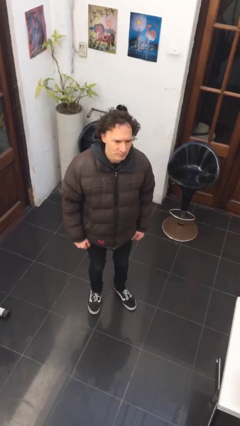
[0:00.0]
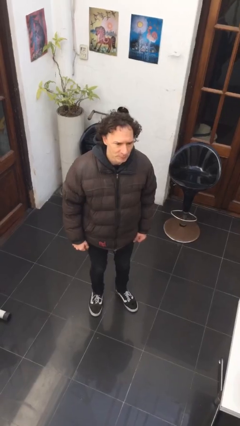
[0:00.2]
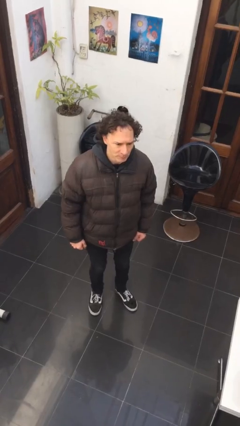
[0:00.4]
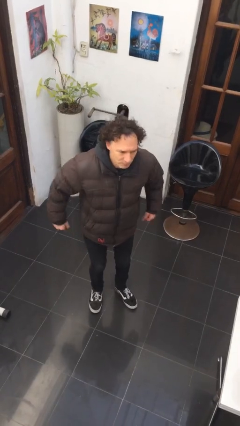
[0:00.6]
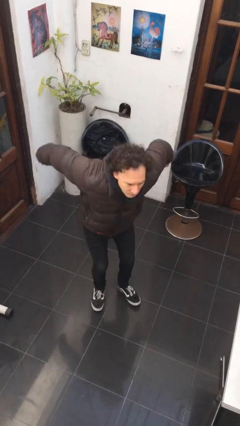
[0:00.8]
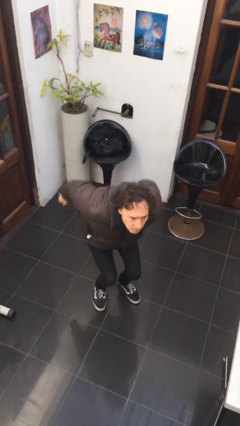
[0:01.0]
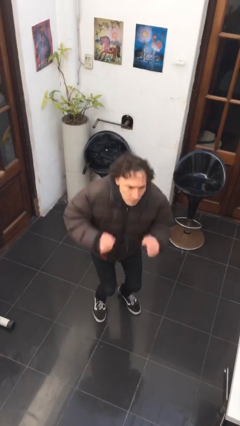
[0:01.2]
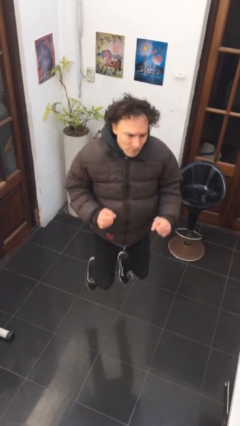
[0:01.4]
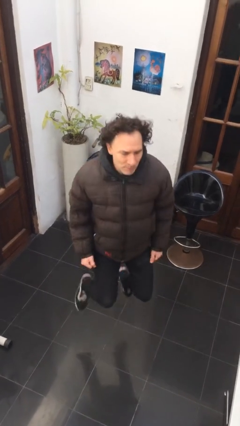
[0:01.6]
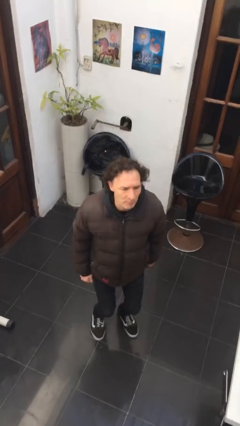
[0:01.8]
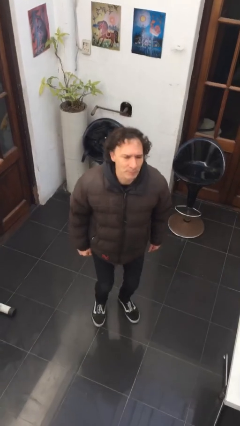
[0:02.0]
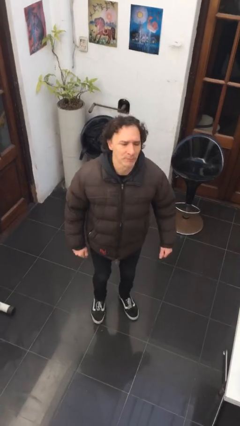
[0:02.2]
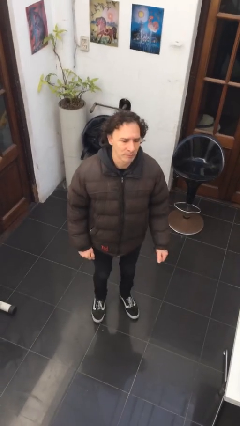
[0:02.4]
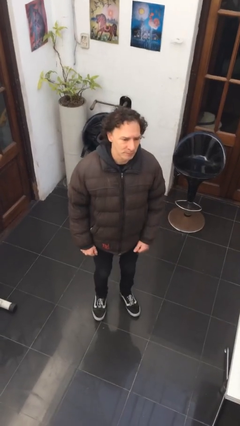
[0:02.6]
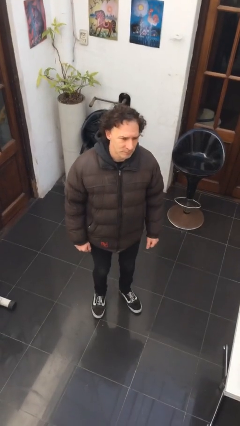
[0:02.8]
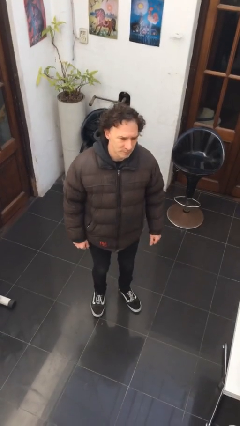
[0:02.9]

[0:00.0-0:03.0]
person jumps

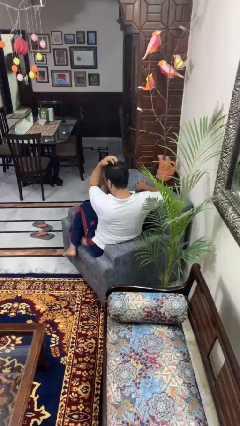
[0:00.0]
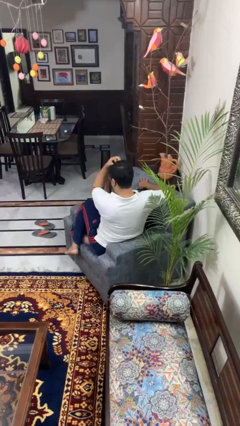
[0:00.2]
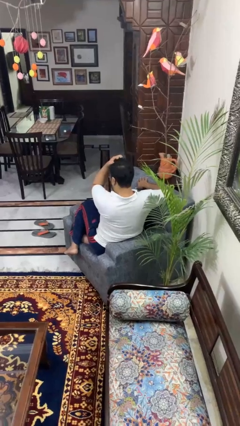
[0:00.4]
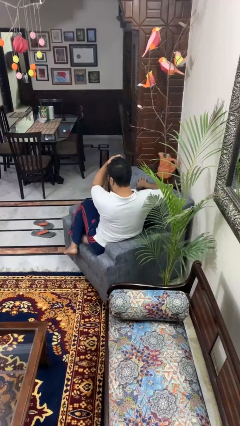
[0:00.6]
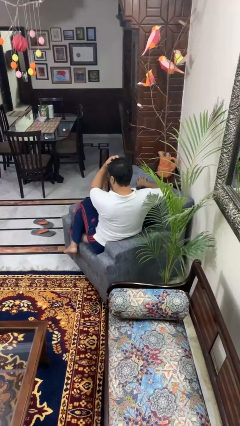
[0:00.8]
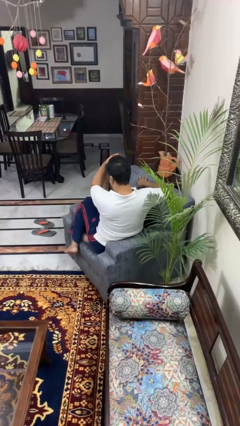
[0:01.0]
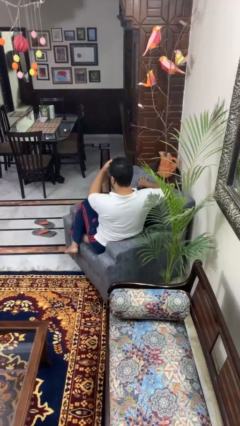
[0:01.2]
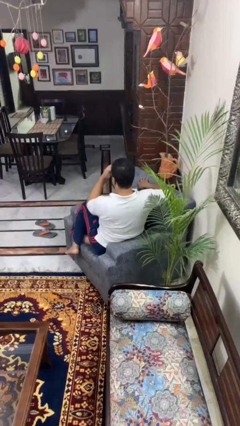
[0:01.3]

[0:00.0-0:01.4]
person scratches face

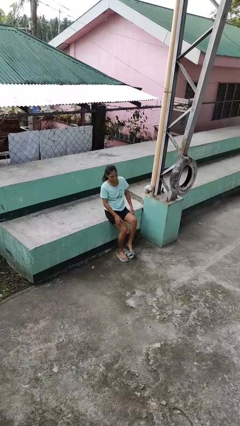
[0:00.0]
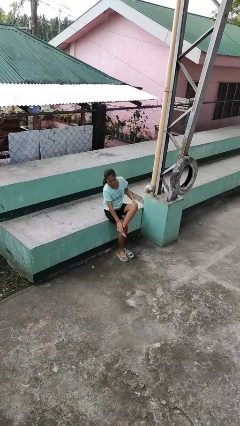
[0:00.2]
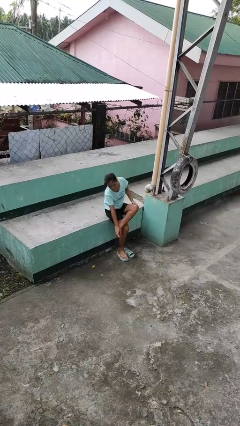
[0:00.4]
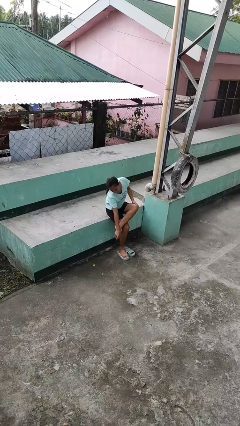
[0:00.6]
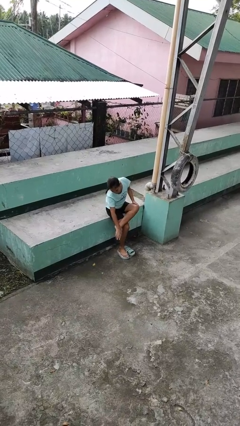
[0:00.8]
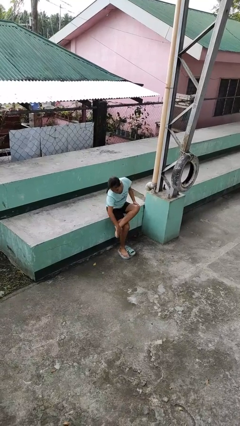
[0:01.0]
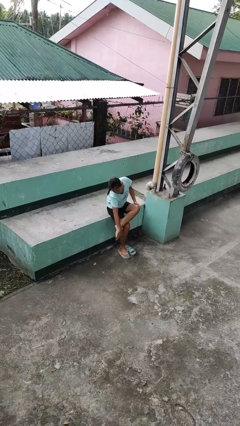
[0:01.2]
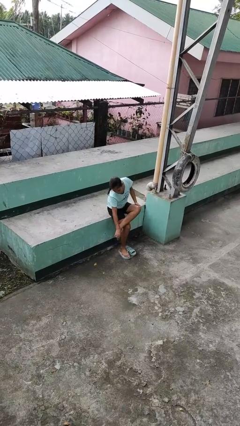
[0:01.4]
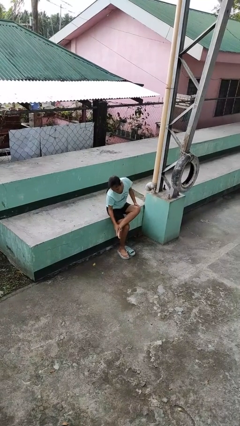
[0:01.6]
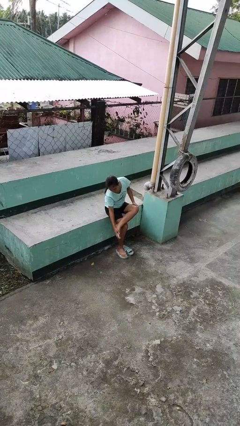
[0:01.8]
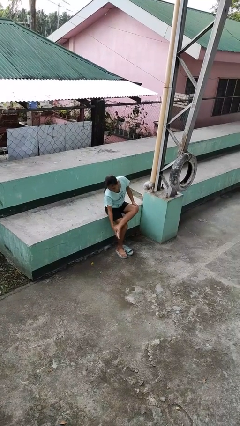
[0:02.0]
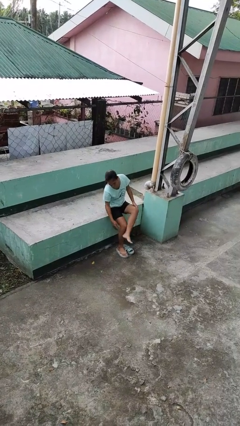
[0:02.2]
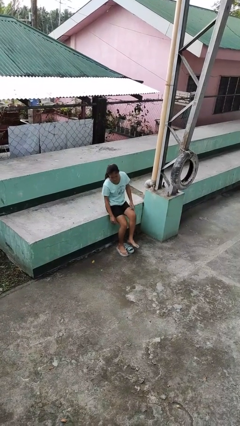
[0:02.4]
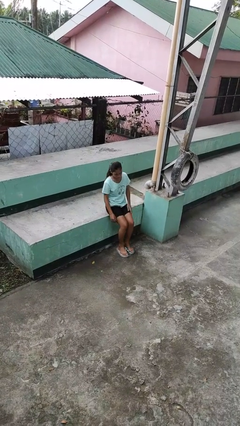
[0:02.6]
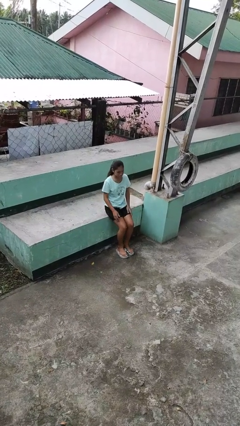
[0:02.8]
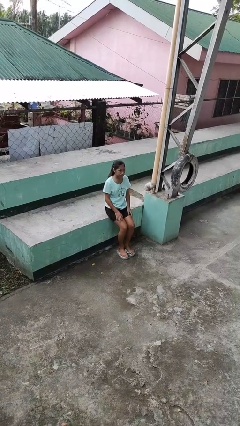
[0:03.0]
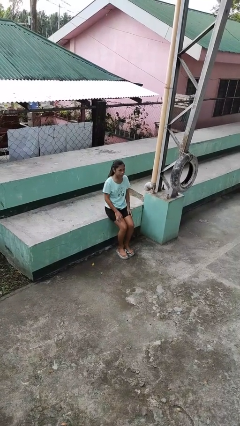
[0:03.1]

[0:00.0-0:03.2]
person rubs foot

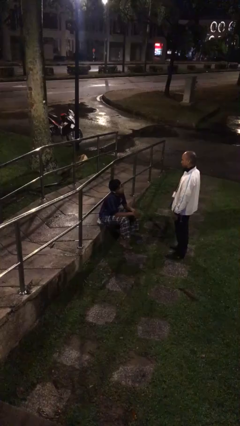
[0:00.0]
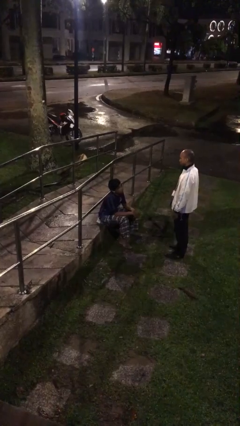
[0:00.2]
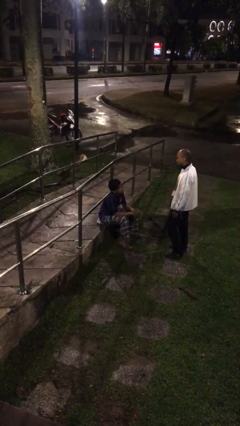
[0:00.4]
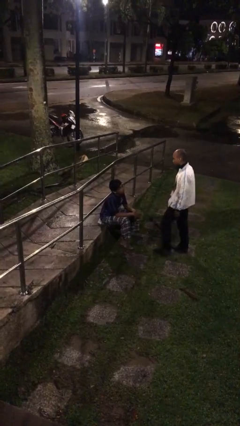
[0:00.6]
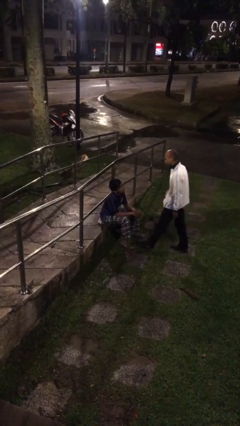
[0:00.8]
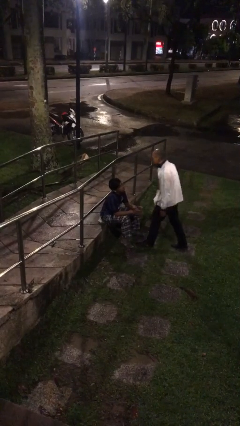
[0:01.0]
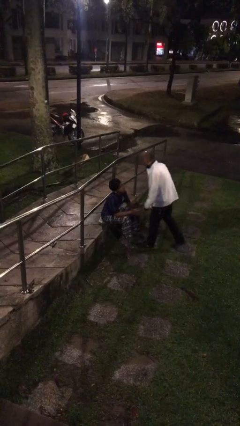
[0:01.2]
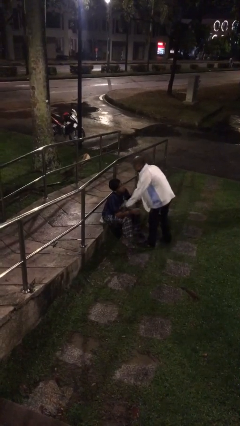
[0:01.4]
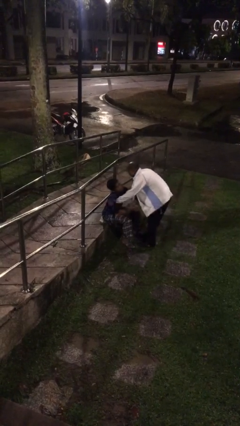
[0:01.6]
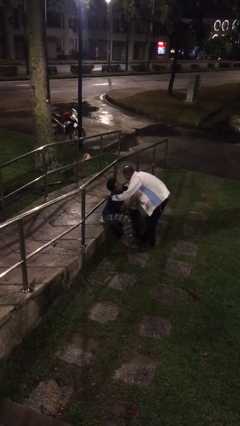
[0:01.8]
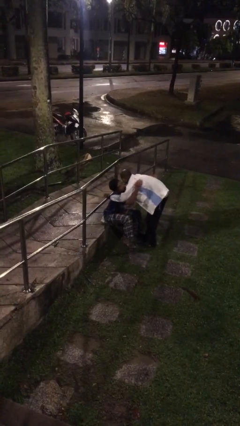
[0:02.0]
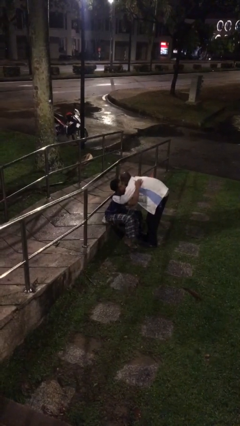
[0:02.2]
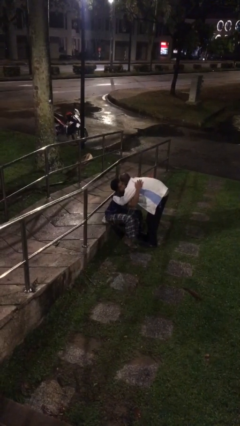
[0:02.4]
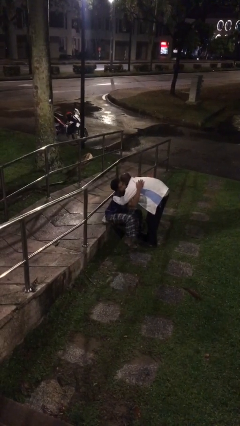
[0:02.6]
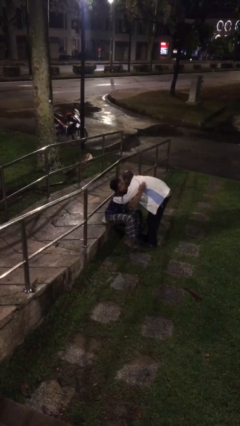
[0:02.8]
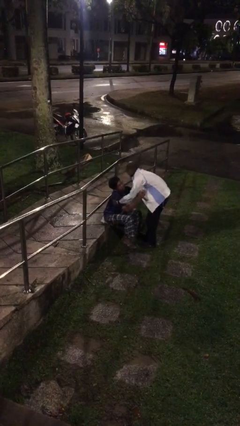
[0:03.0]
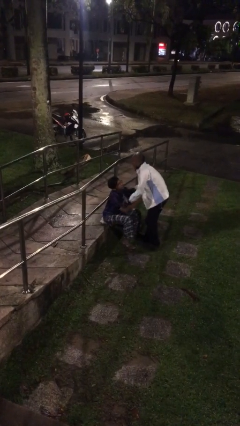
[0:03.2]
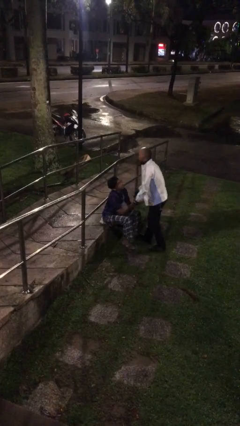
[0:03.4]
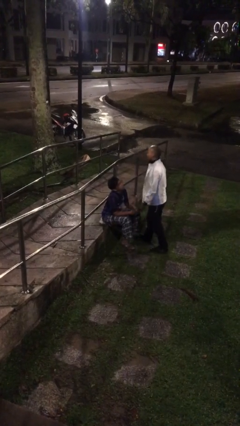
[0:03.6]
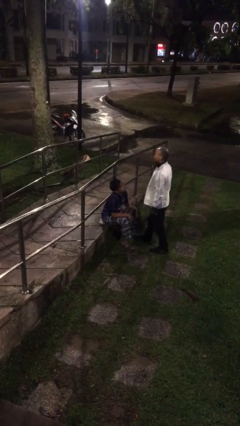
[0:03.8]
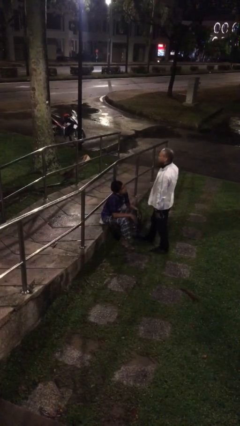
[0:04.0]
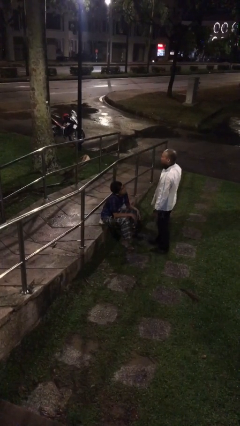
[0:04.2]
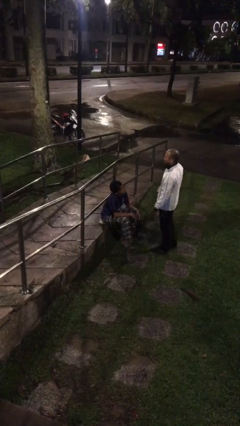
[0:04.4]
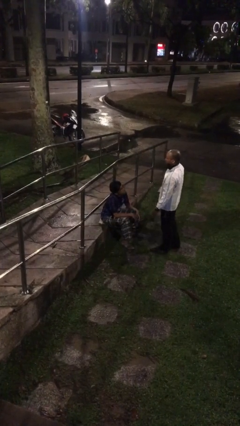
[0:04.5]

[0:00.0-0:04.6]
person embraces person

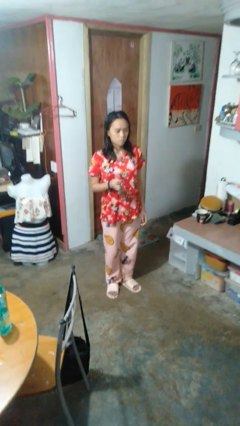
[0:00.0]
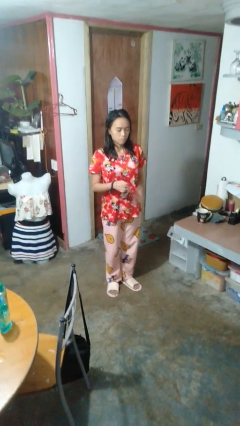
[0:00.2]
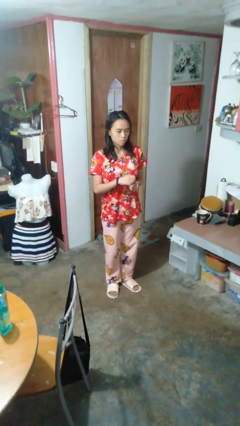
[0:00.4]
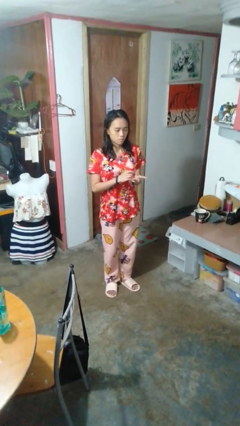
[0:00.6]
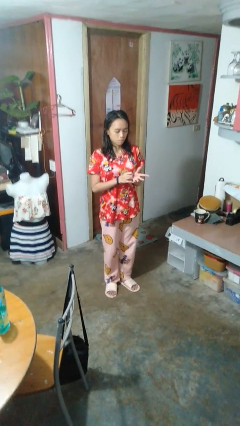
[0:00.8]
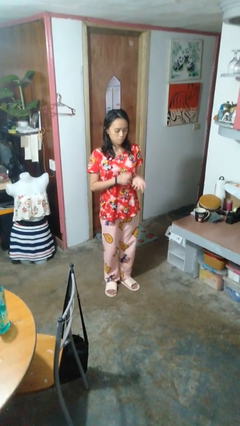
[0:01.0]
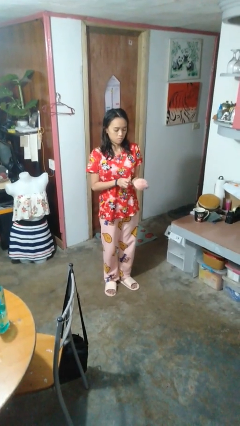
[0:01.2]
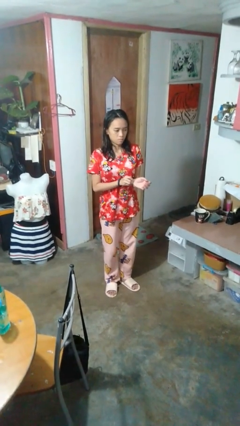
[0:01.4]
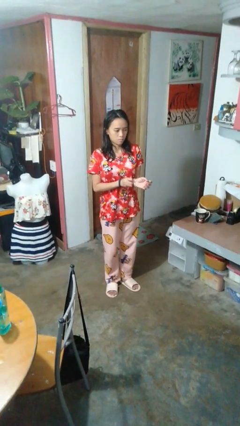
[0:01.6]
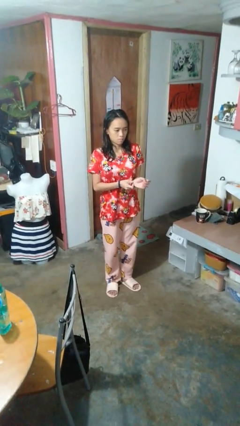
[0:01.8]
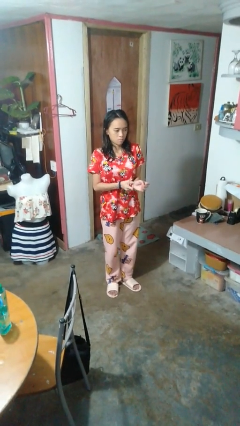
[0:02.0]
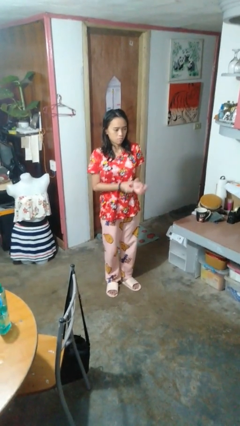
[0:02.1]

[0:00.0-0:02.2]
person puts on wristwatch

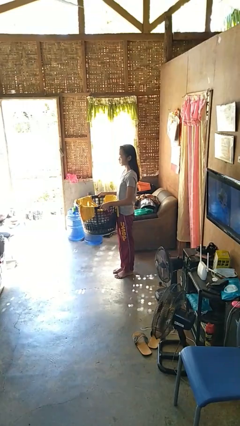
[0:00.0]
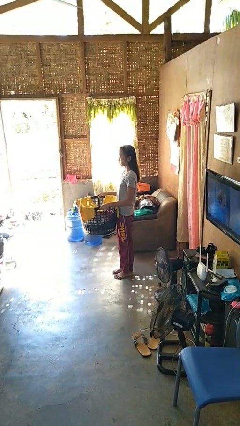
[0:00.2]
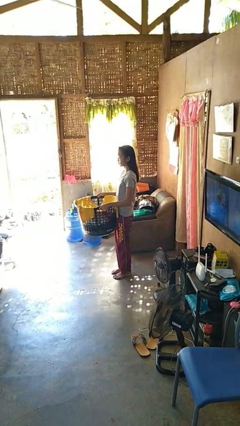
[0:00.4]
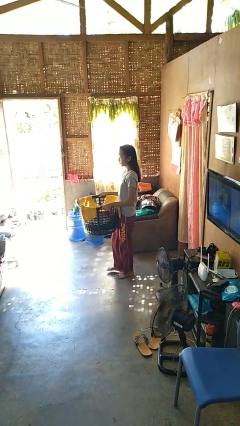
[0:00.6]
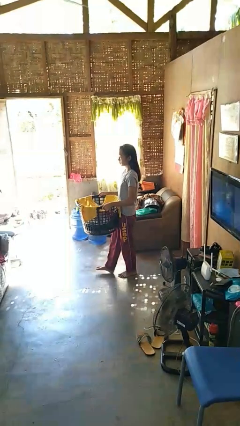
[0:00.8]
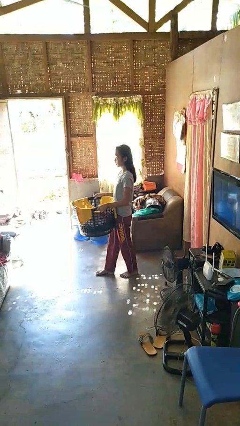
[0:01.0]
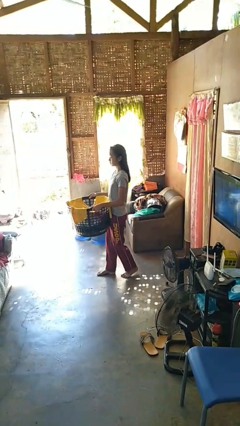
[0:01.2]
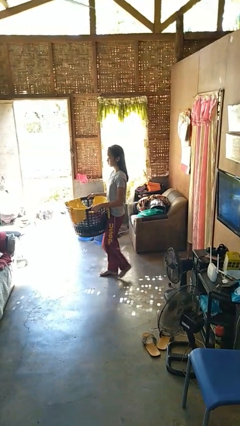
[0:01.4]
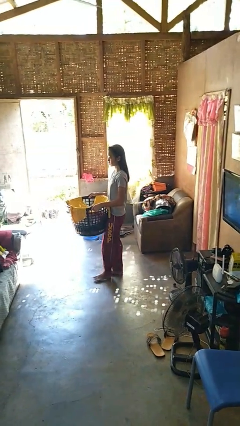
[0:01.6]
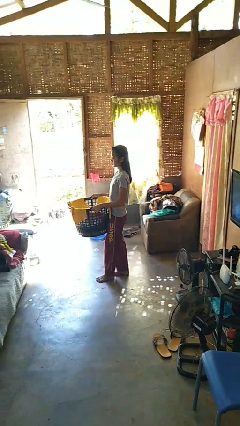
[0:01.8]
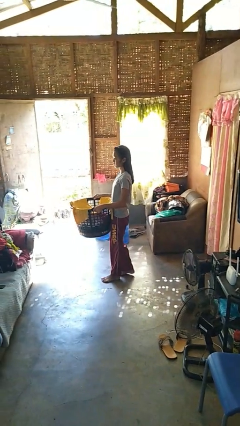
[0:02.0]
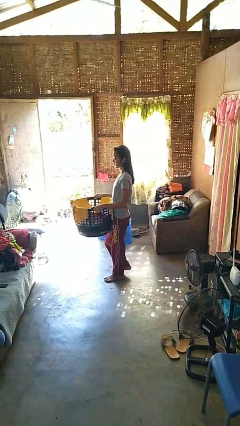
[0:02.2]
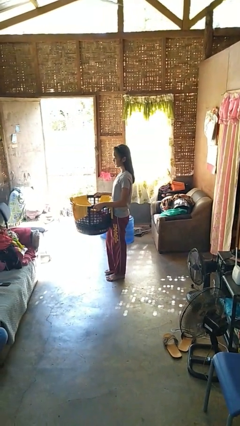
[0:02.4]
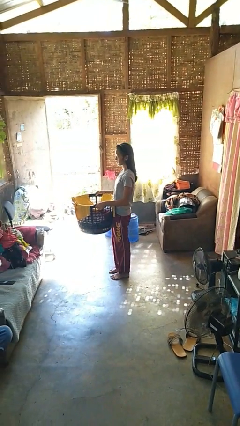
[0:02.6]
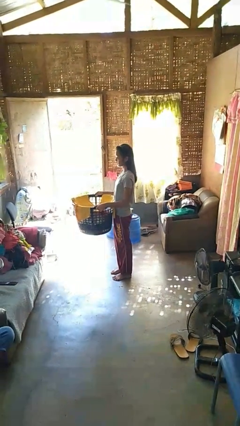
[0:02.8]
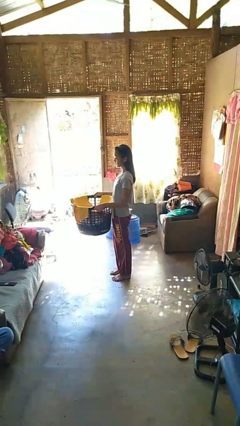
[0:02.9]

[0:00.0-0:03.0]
person carries laundry basket

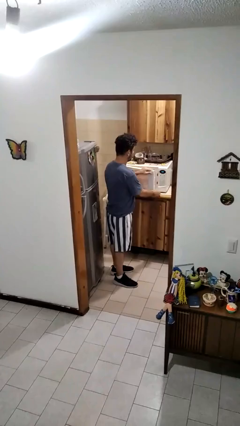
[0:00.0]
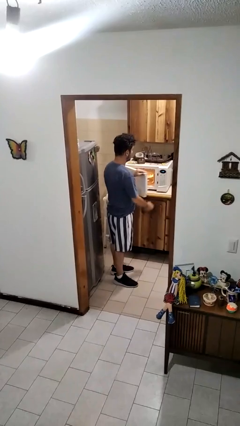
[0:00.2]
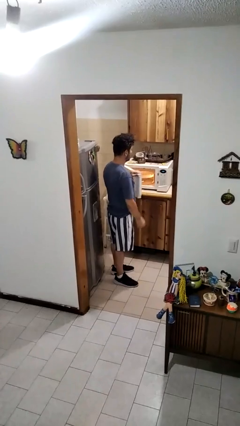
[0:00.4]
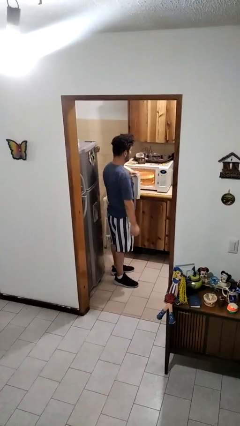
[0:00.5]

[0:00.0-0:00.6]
person opens microwave
